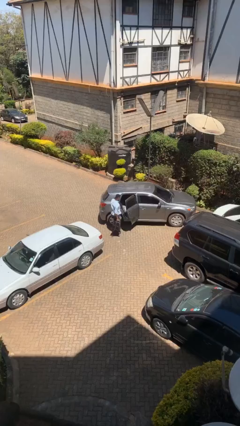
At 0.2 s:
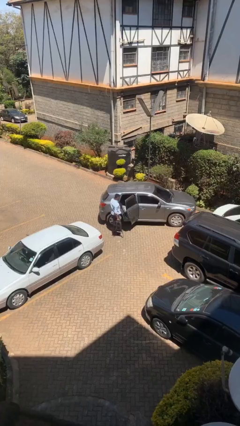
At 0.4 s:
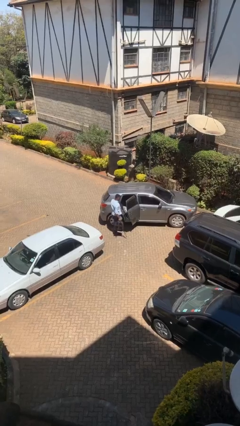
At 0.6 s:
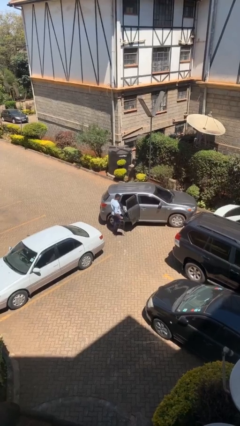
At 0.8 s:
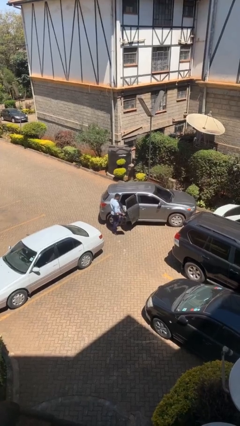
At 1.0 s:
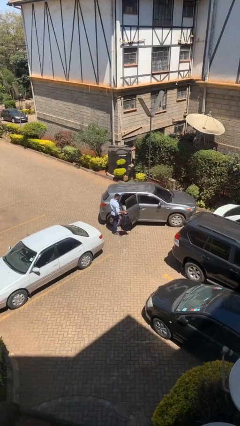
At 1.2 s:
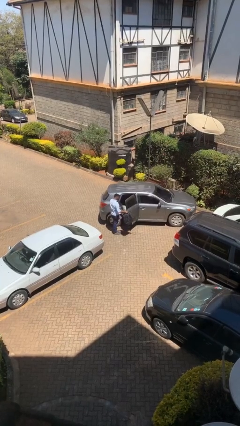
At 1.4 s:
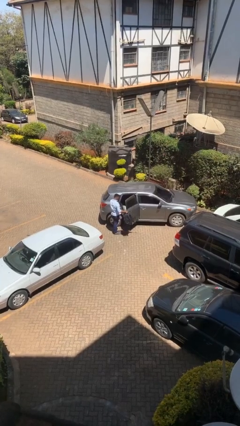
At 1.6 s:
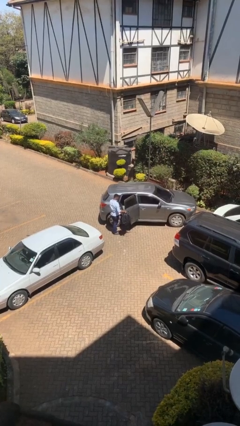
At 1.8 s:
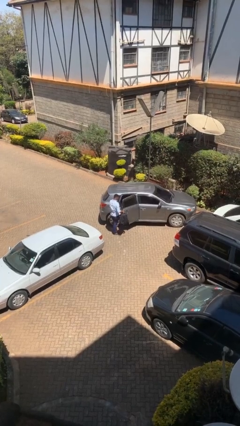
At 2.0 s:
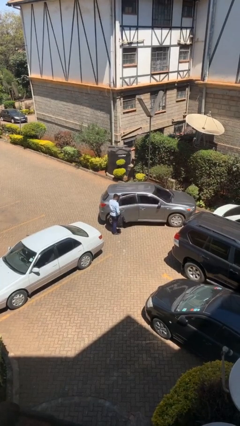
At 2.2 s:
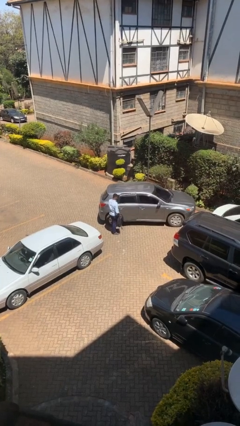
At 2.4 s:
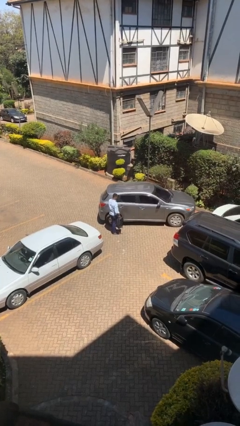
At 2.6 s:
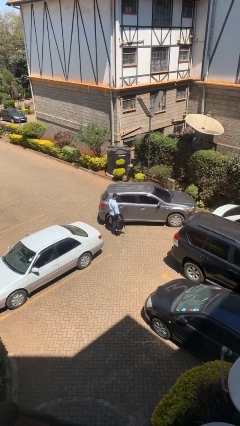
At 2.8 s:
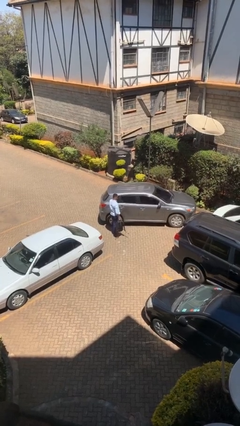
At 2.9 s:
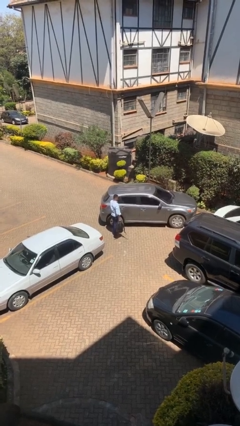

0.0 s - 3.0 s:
person closes car door

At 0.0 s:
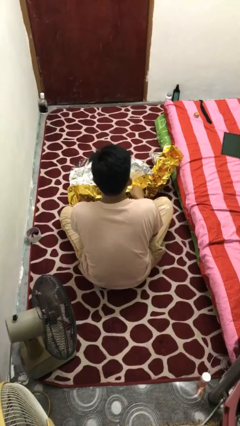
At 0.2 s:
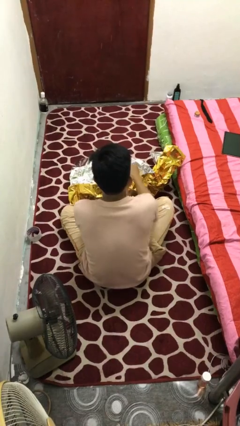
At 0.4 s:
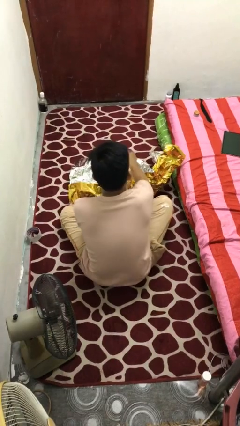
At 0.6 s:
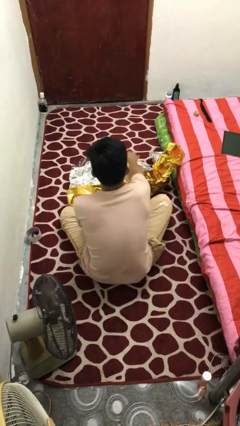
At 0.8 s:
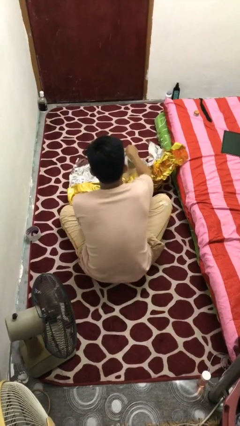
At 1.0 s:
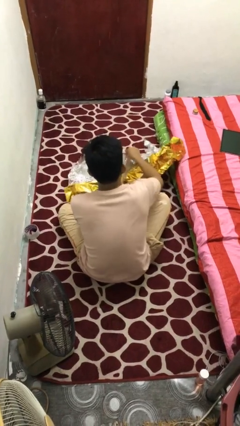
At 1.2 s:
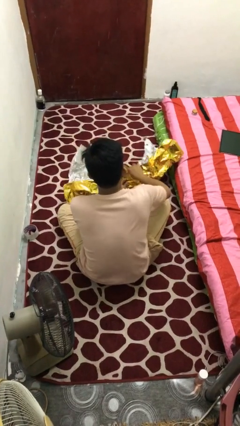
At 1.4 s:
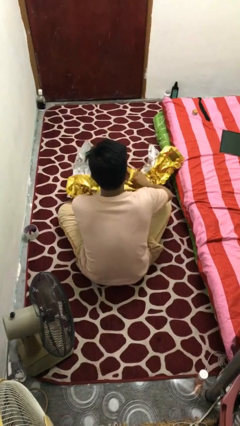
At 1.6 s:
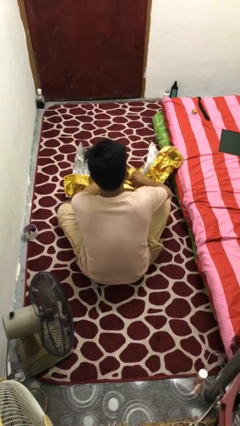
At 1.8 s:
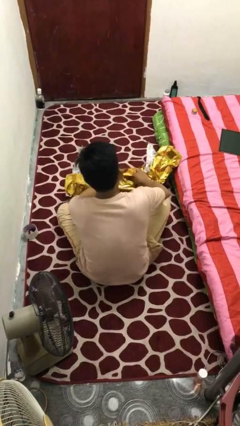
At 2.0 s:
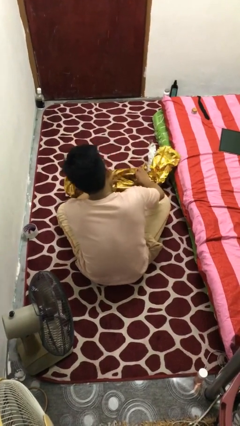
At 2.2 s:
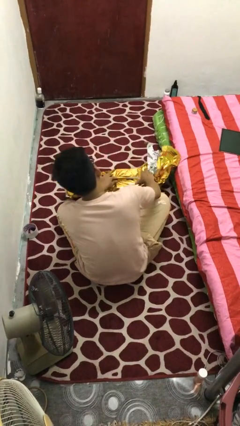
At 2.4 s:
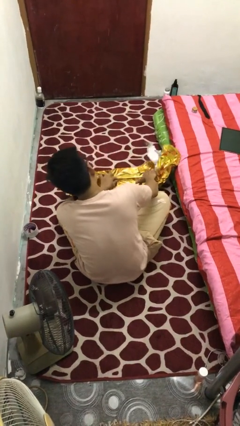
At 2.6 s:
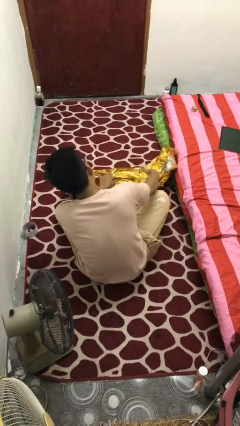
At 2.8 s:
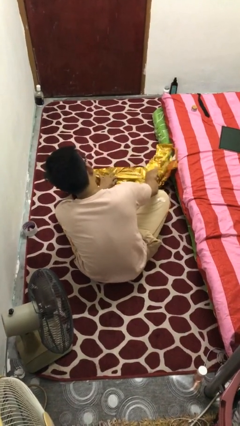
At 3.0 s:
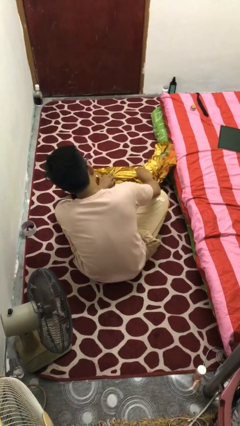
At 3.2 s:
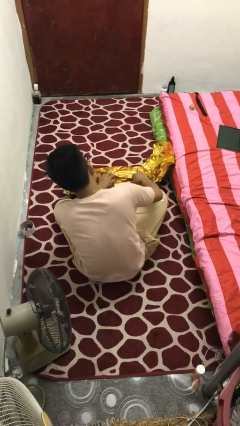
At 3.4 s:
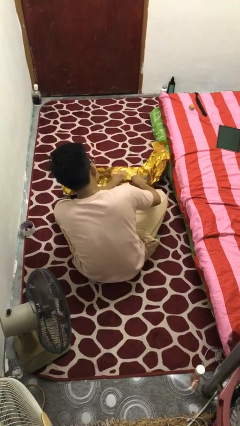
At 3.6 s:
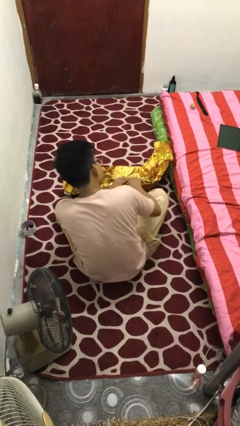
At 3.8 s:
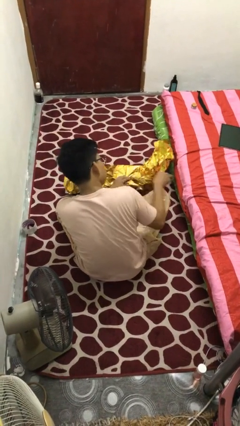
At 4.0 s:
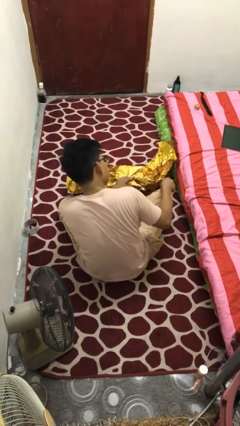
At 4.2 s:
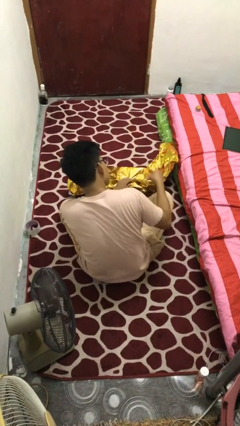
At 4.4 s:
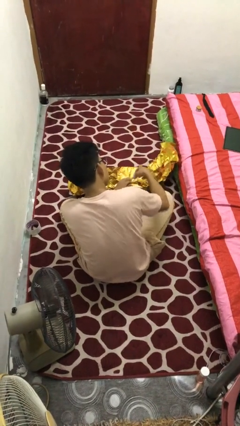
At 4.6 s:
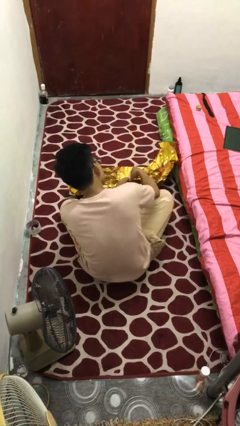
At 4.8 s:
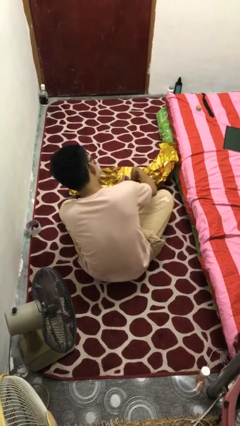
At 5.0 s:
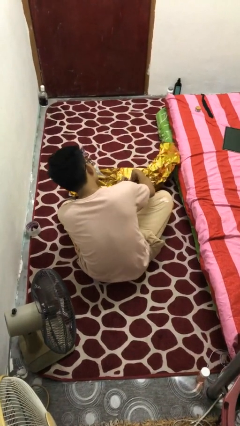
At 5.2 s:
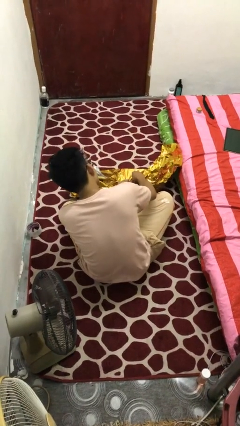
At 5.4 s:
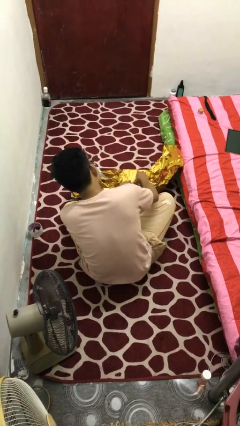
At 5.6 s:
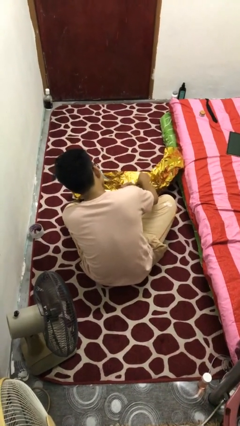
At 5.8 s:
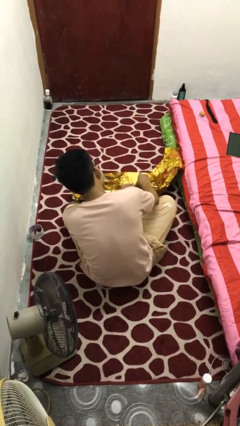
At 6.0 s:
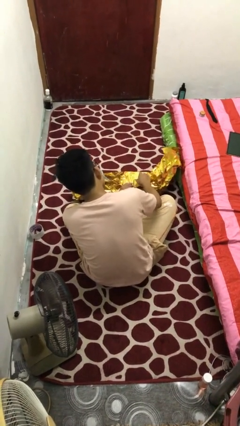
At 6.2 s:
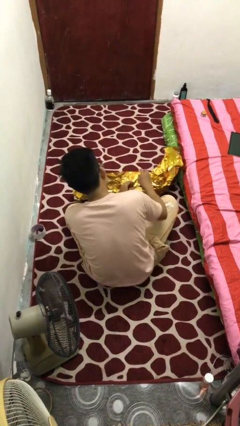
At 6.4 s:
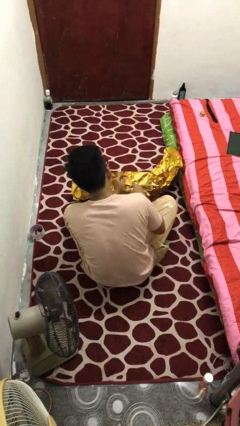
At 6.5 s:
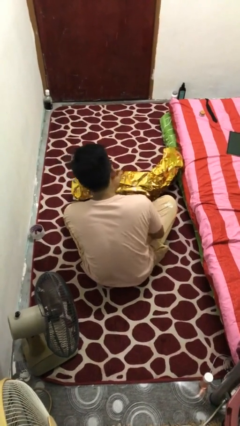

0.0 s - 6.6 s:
person wraps box

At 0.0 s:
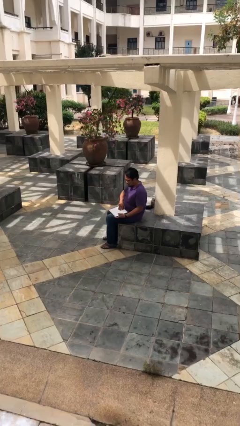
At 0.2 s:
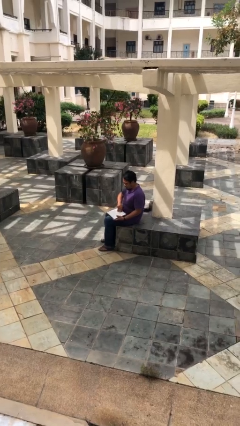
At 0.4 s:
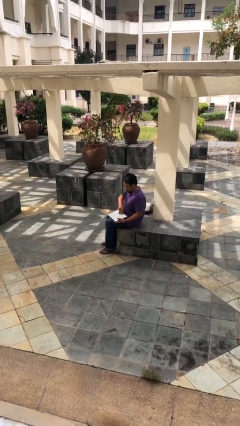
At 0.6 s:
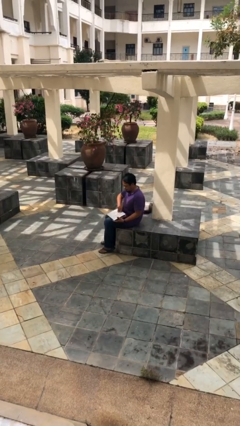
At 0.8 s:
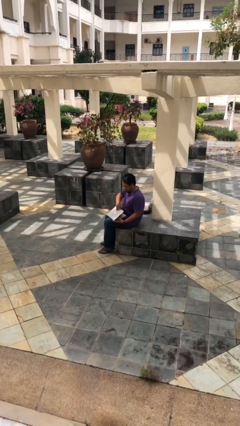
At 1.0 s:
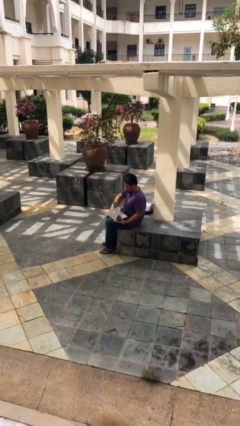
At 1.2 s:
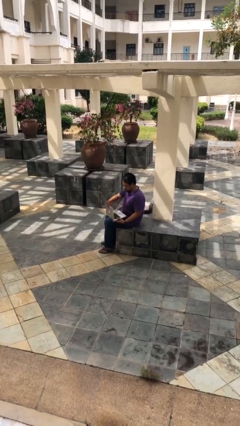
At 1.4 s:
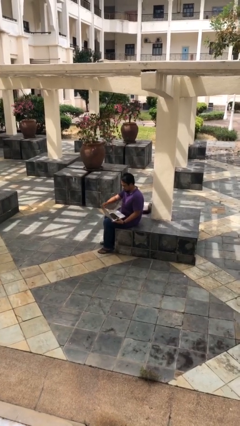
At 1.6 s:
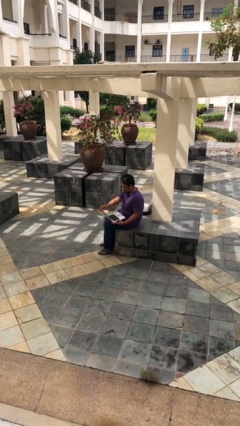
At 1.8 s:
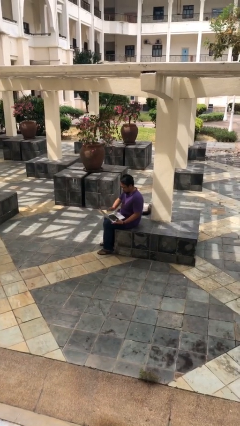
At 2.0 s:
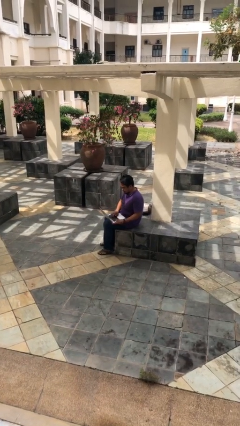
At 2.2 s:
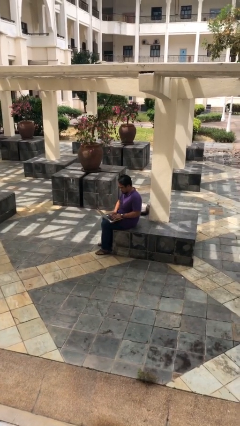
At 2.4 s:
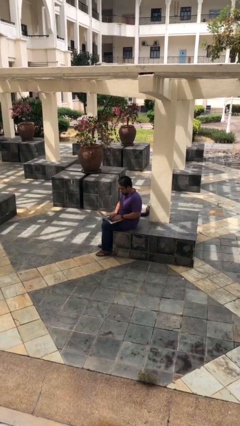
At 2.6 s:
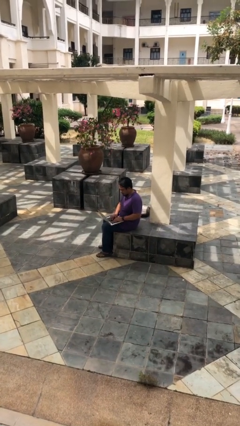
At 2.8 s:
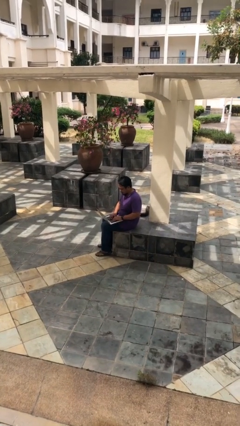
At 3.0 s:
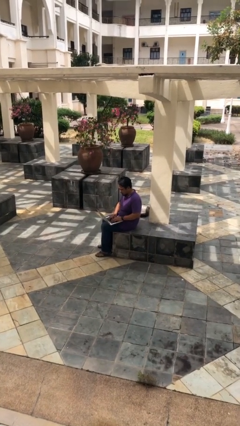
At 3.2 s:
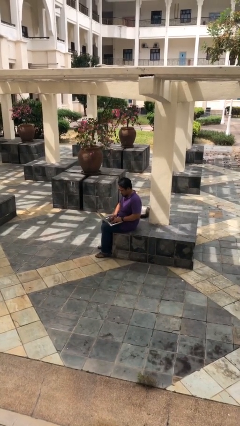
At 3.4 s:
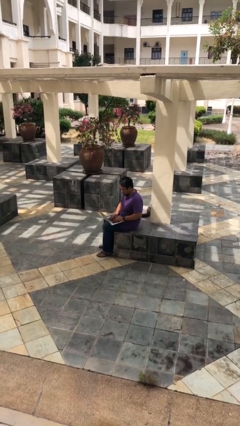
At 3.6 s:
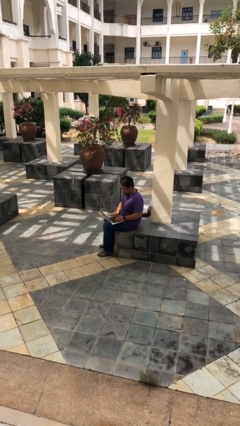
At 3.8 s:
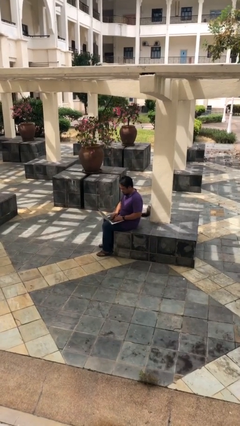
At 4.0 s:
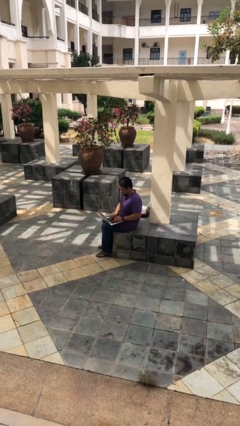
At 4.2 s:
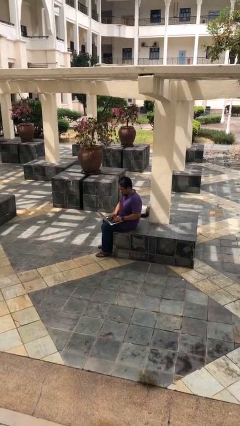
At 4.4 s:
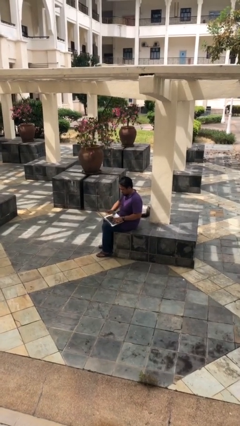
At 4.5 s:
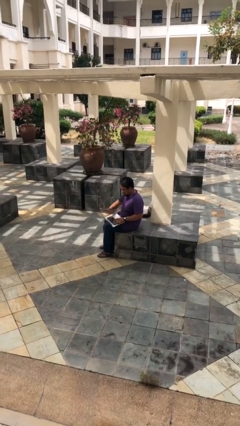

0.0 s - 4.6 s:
person interacts with laptop

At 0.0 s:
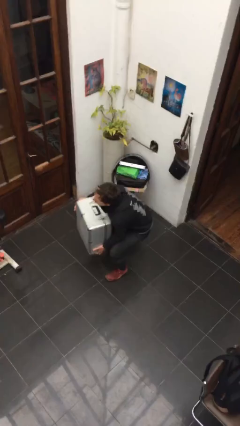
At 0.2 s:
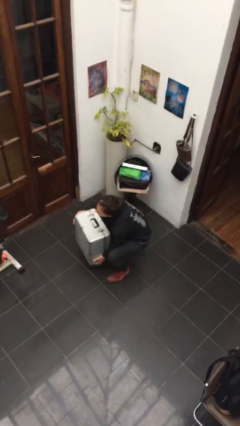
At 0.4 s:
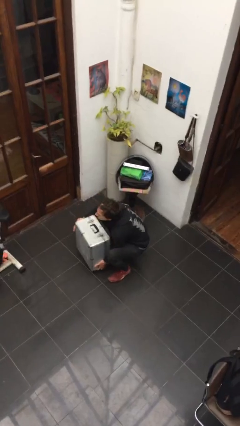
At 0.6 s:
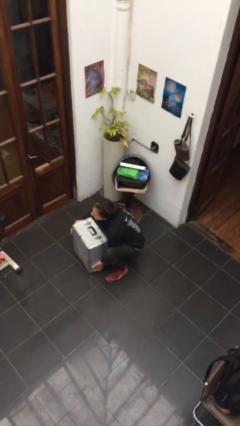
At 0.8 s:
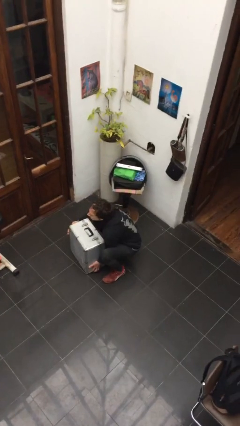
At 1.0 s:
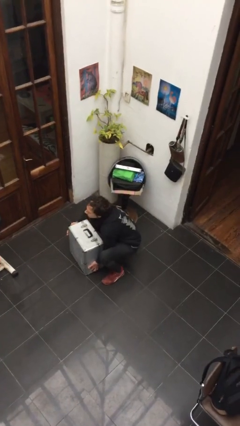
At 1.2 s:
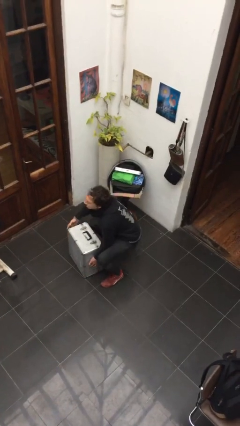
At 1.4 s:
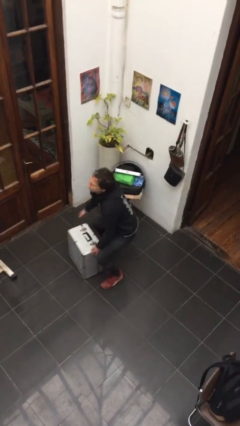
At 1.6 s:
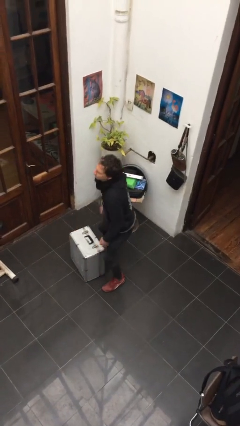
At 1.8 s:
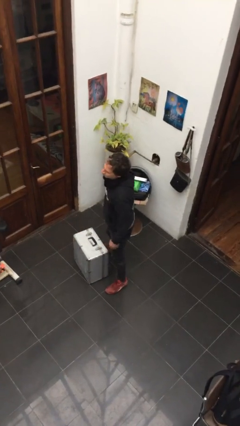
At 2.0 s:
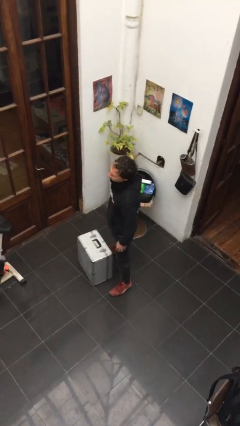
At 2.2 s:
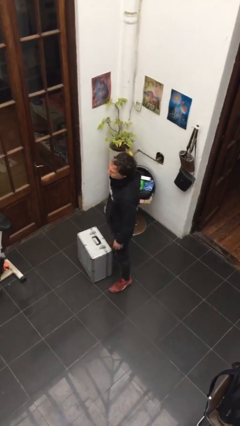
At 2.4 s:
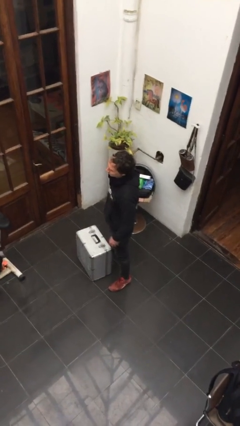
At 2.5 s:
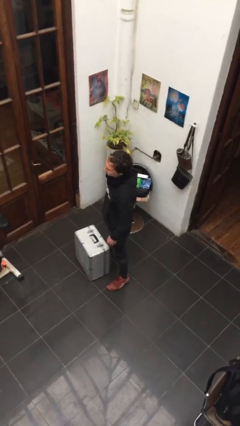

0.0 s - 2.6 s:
person puts down object on floor

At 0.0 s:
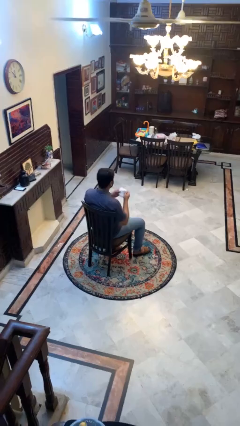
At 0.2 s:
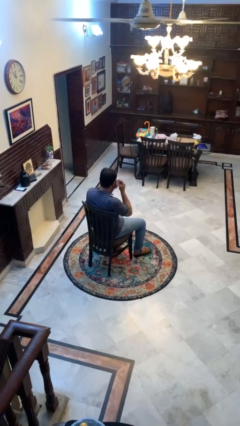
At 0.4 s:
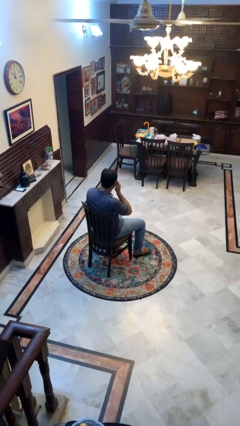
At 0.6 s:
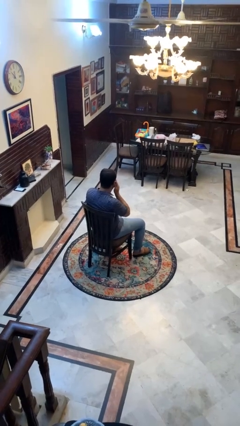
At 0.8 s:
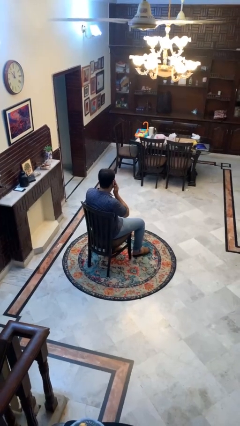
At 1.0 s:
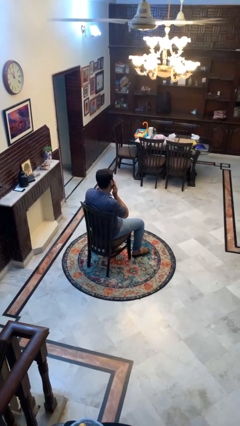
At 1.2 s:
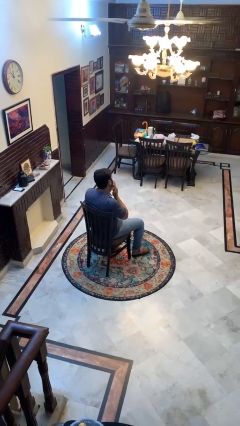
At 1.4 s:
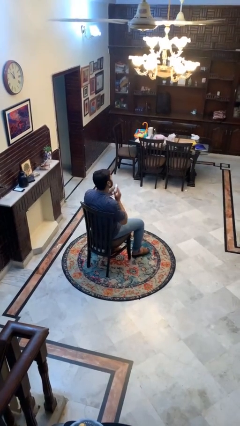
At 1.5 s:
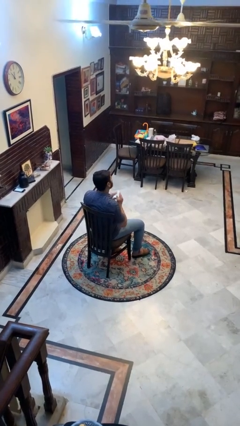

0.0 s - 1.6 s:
person wipes mouth with napkin
